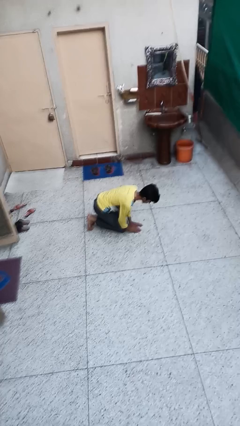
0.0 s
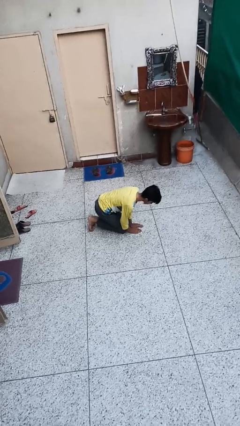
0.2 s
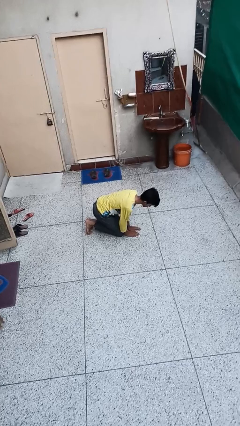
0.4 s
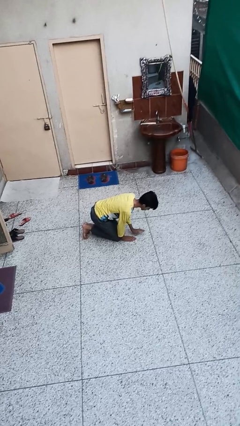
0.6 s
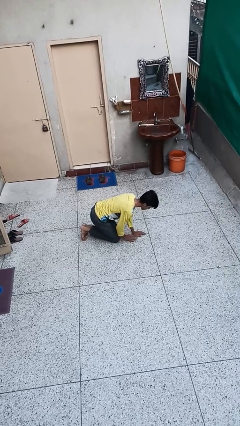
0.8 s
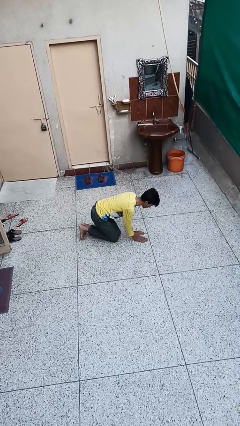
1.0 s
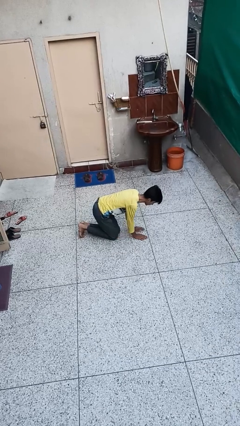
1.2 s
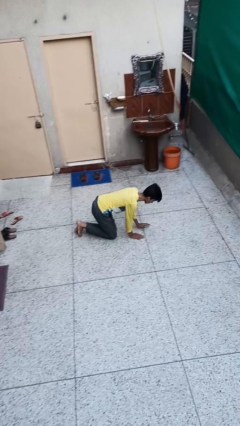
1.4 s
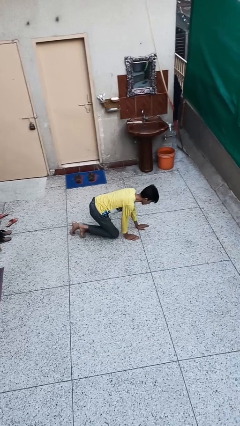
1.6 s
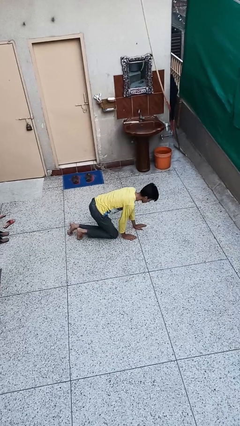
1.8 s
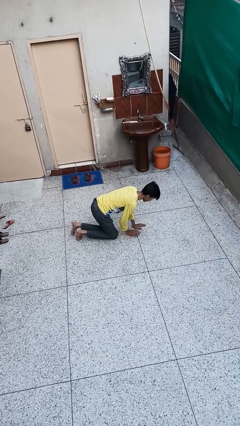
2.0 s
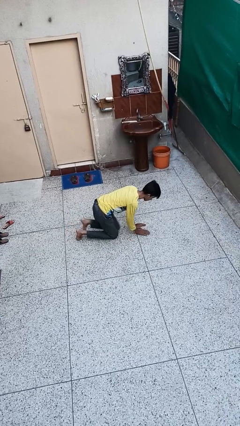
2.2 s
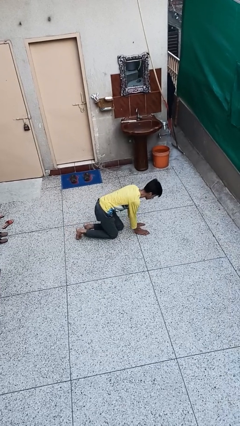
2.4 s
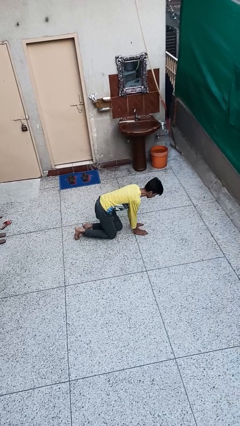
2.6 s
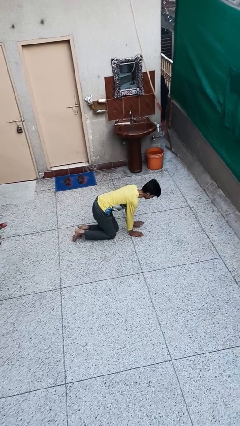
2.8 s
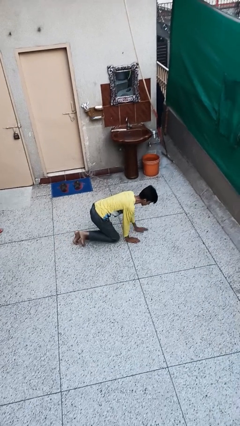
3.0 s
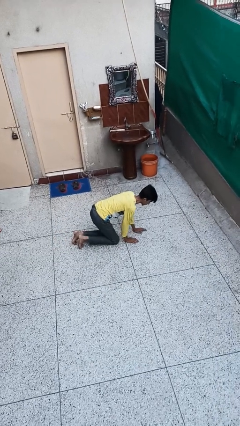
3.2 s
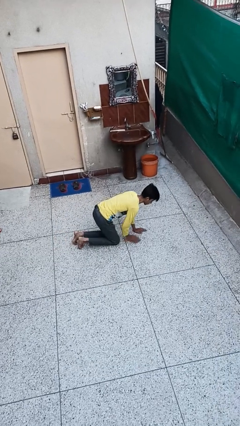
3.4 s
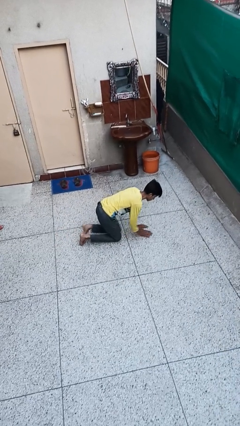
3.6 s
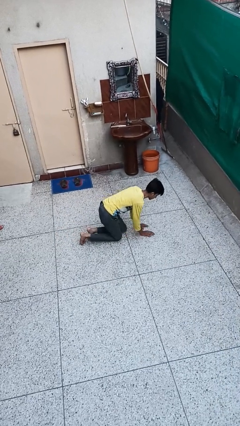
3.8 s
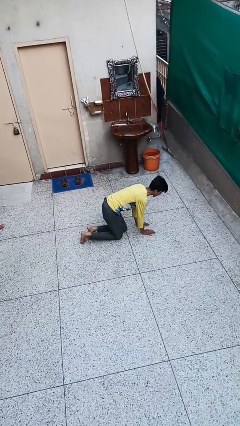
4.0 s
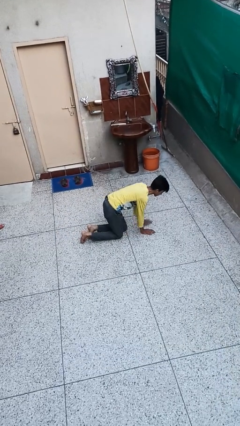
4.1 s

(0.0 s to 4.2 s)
person crawls

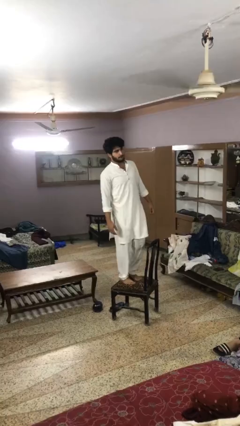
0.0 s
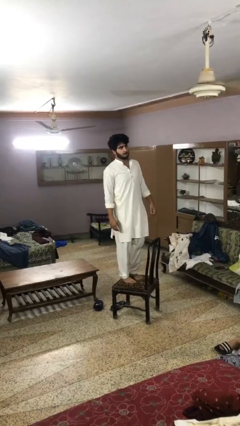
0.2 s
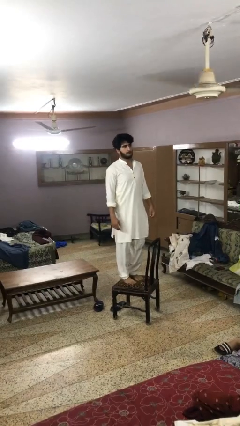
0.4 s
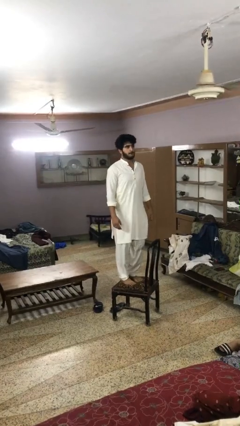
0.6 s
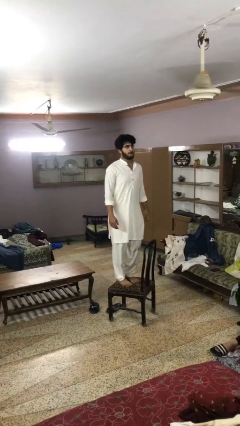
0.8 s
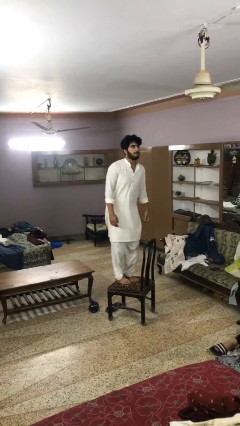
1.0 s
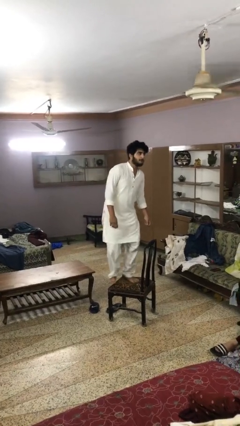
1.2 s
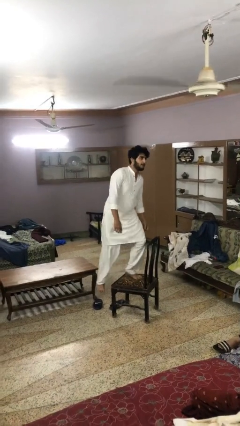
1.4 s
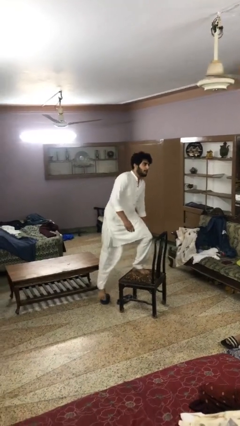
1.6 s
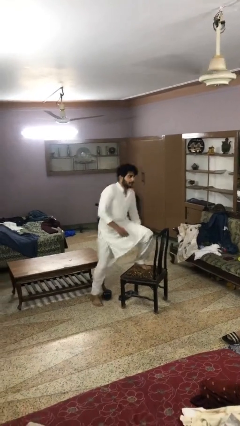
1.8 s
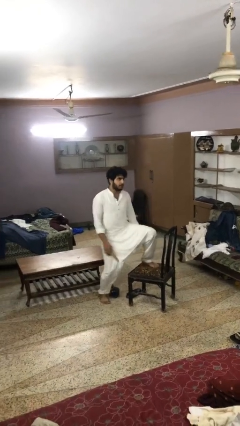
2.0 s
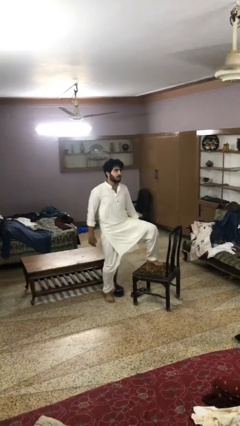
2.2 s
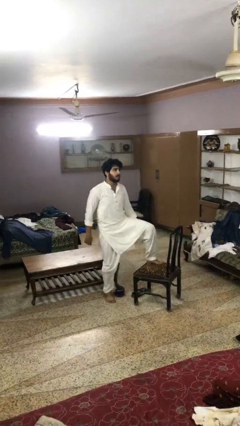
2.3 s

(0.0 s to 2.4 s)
person climbs off chair

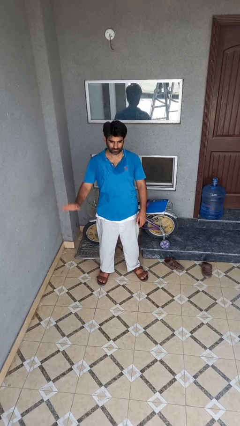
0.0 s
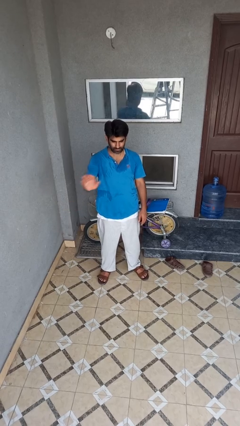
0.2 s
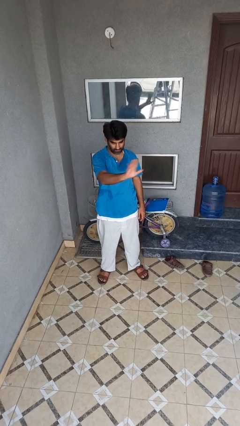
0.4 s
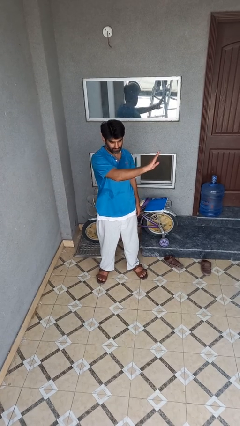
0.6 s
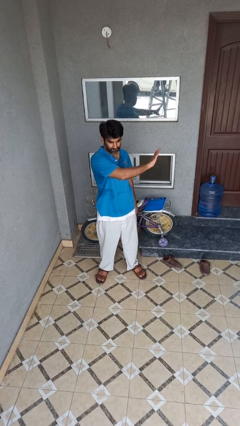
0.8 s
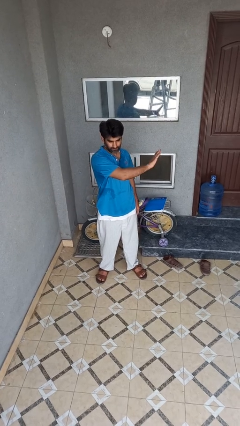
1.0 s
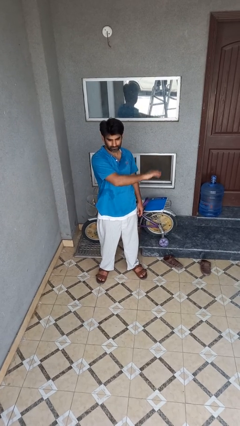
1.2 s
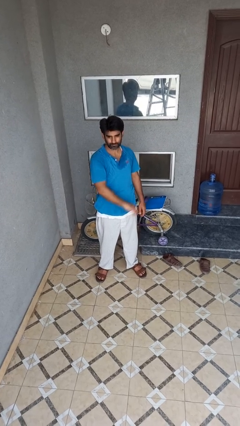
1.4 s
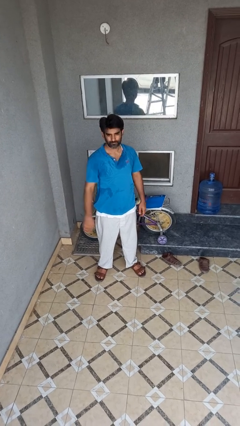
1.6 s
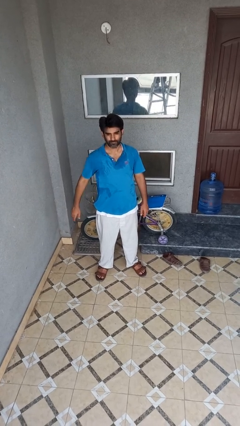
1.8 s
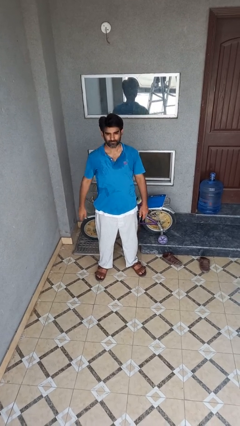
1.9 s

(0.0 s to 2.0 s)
person gestures swipe left

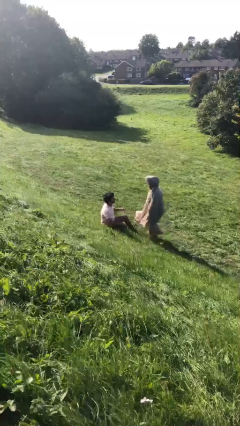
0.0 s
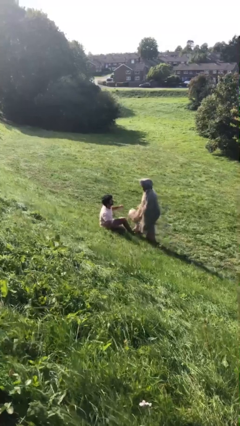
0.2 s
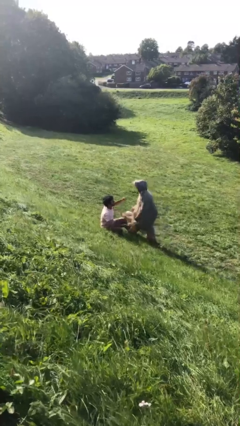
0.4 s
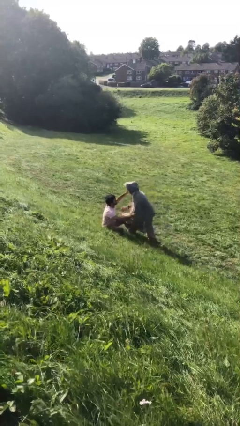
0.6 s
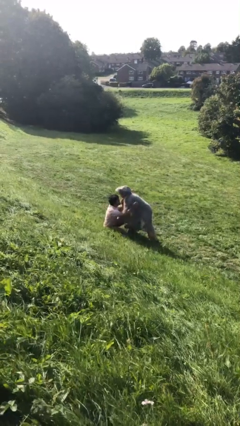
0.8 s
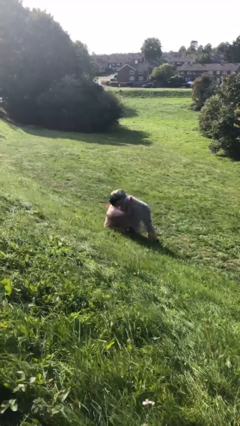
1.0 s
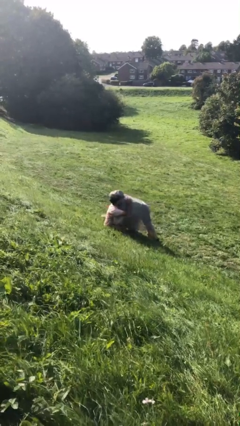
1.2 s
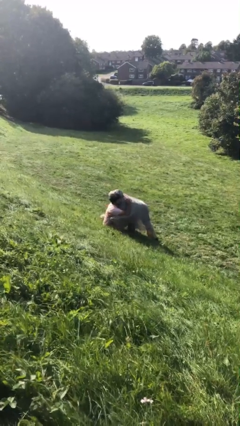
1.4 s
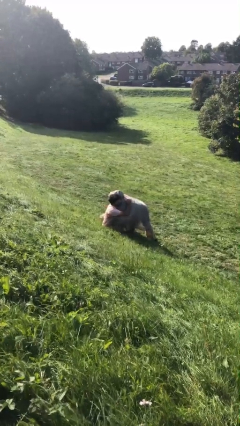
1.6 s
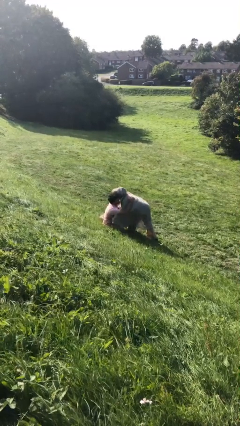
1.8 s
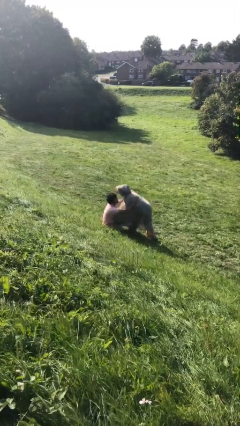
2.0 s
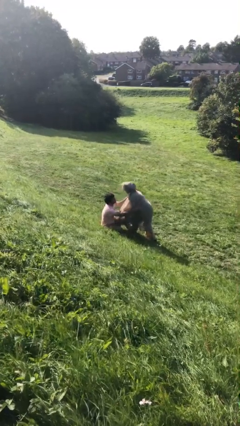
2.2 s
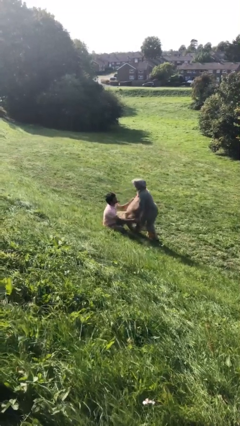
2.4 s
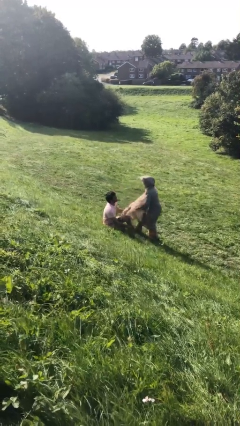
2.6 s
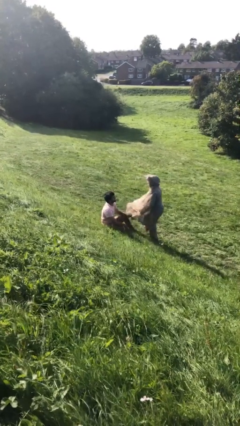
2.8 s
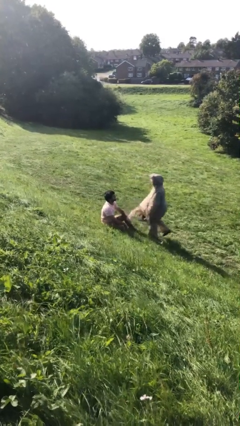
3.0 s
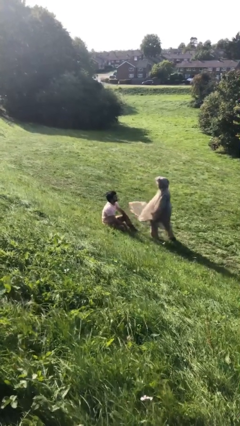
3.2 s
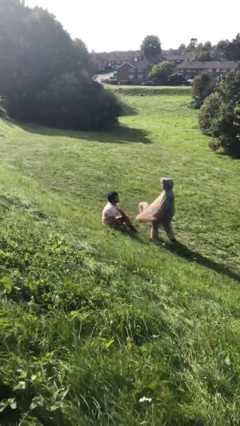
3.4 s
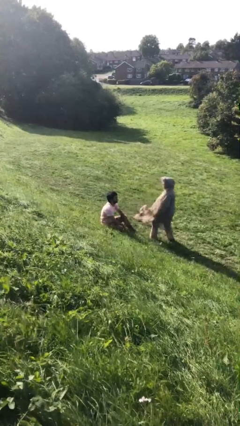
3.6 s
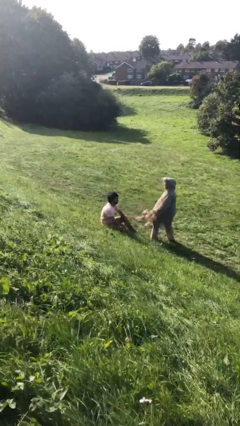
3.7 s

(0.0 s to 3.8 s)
person embraces person

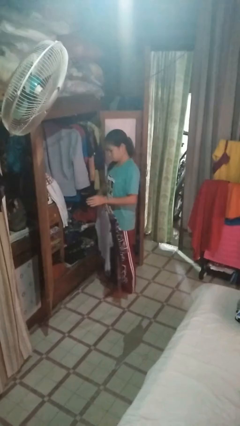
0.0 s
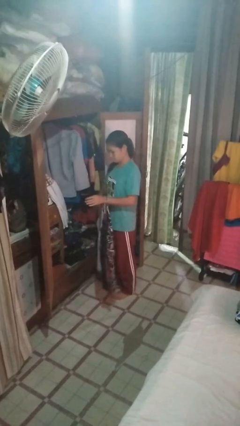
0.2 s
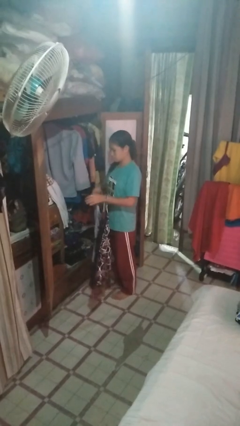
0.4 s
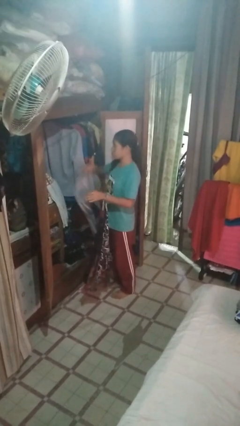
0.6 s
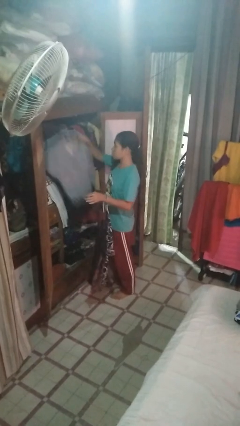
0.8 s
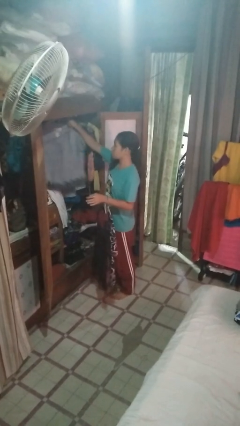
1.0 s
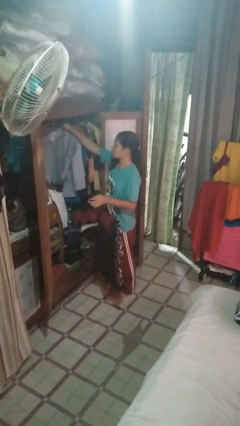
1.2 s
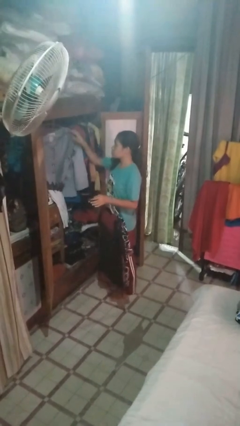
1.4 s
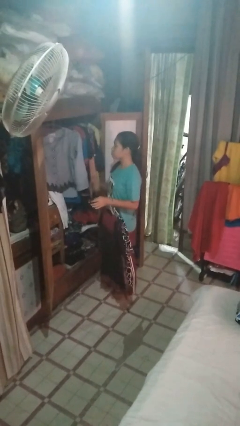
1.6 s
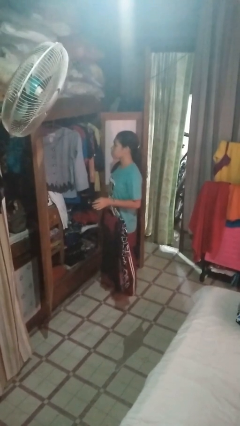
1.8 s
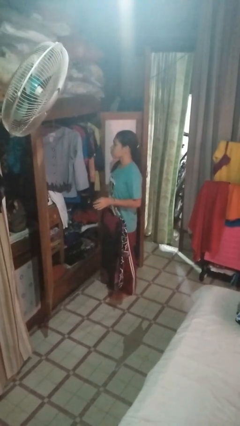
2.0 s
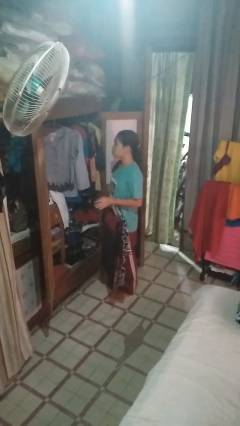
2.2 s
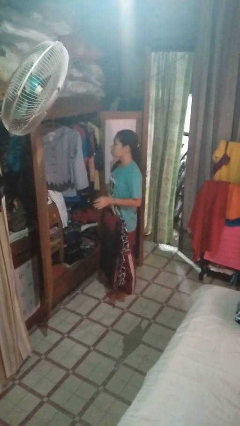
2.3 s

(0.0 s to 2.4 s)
person puts clothes into closet

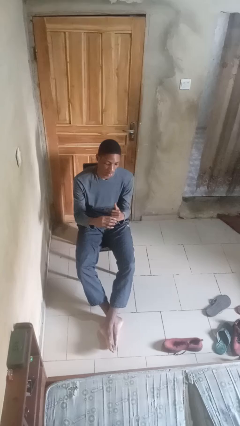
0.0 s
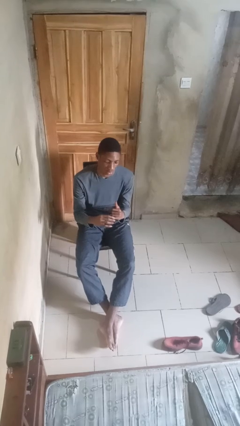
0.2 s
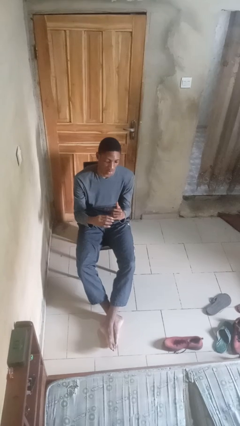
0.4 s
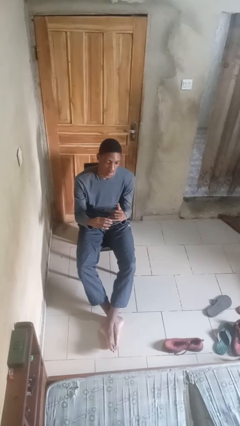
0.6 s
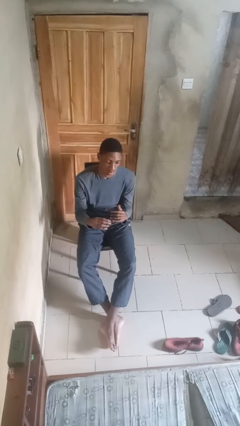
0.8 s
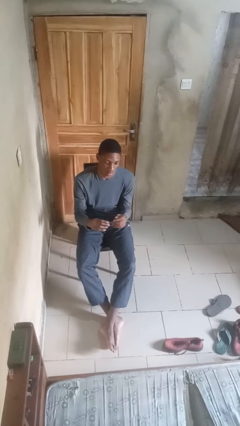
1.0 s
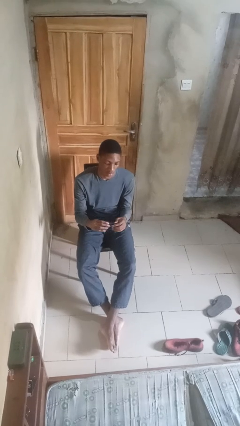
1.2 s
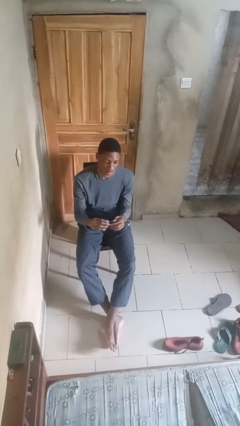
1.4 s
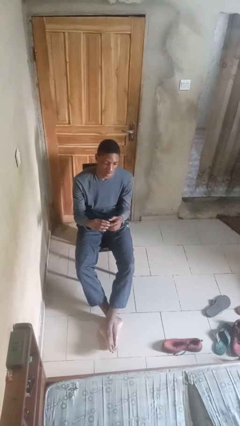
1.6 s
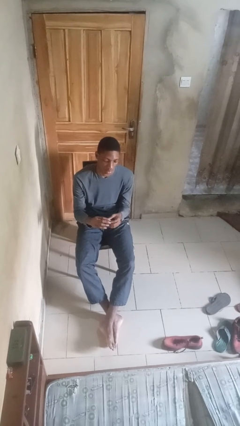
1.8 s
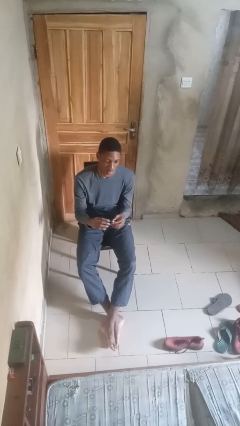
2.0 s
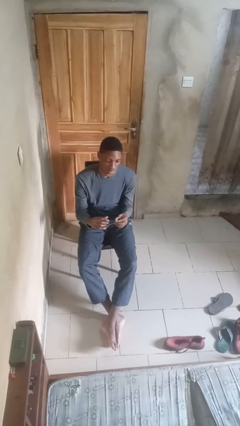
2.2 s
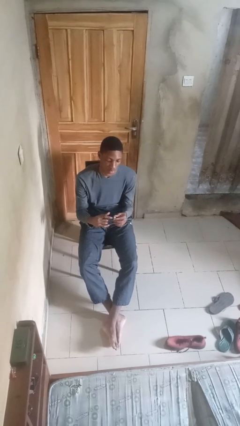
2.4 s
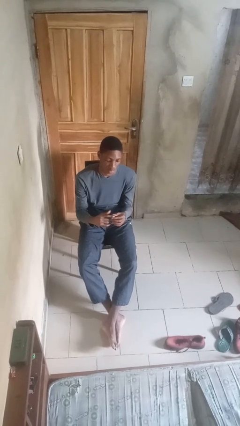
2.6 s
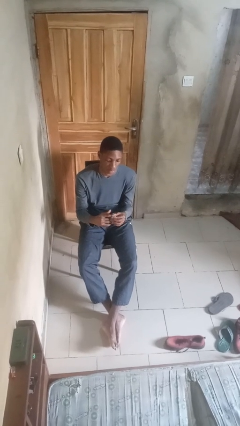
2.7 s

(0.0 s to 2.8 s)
person takes off ring
